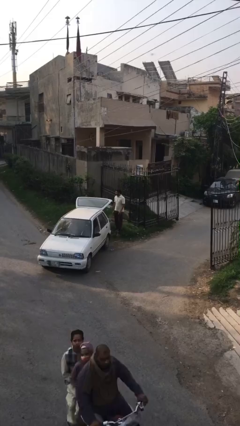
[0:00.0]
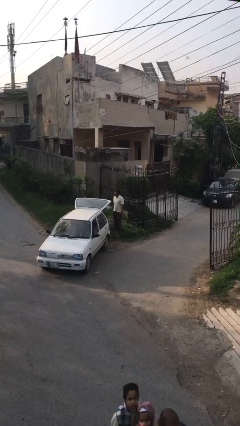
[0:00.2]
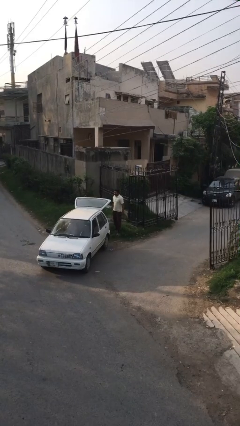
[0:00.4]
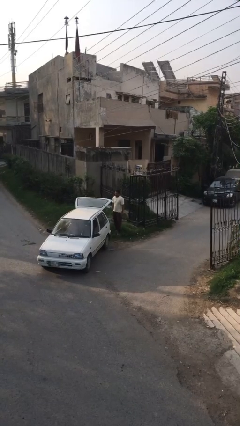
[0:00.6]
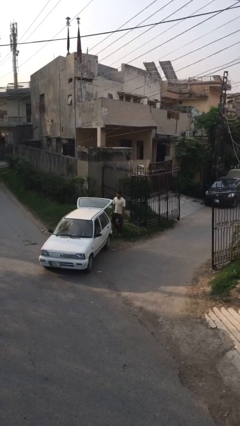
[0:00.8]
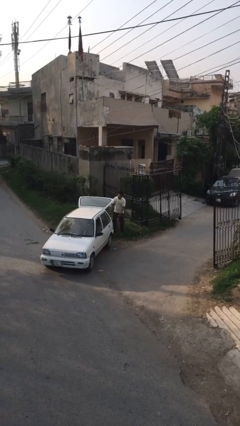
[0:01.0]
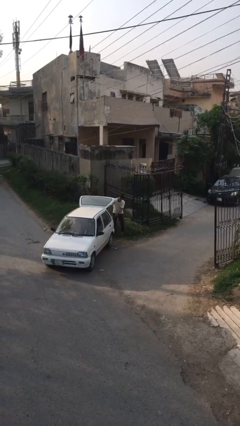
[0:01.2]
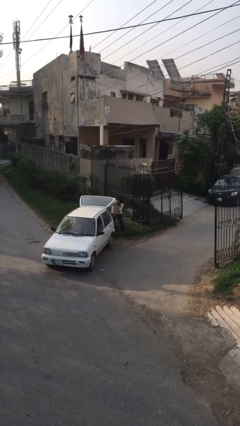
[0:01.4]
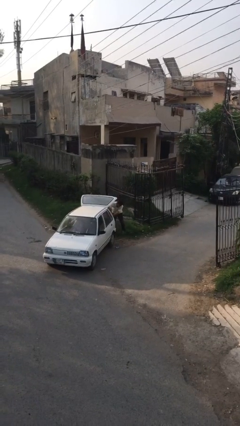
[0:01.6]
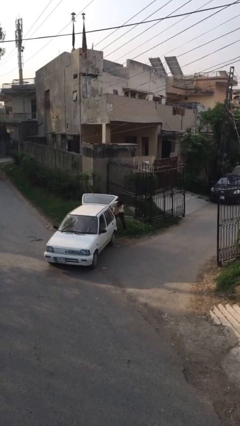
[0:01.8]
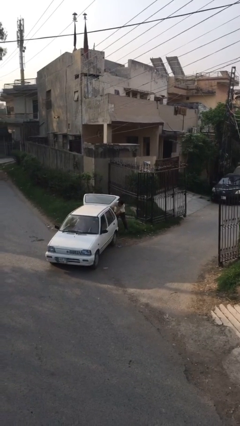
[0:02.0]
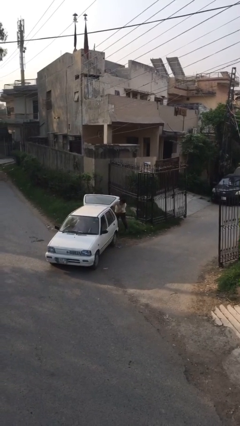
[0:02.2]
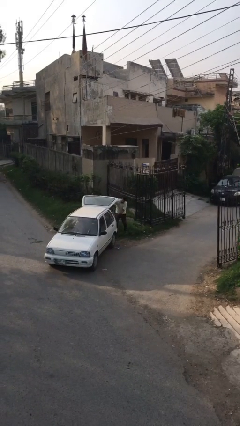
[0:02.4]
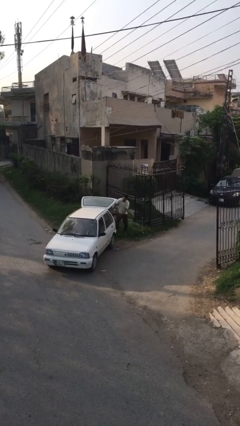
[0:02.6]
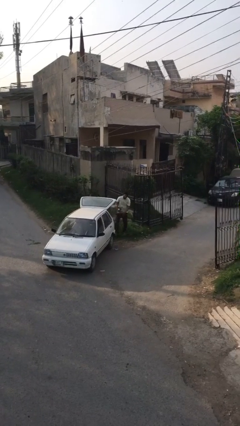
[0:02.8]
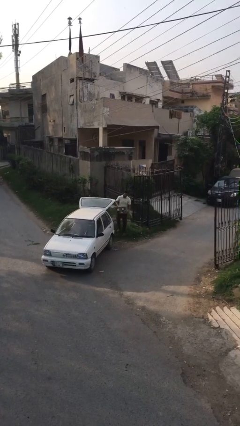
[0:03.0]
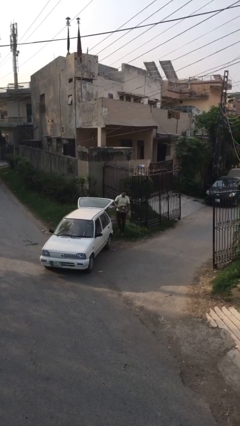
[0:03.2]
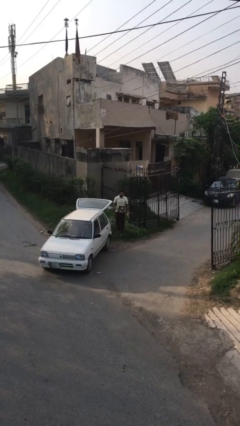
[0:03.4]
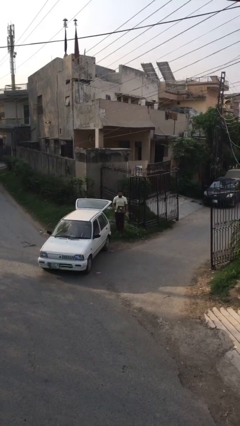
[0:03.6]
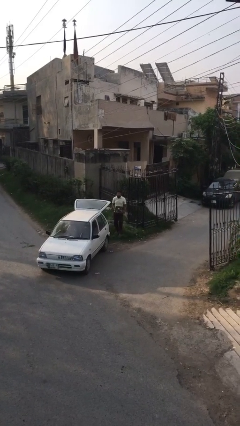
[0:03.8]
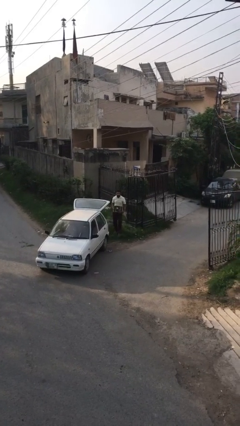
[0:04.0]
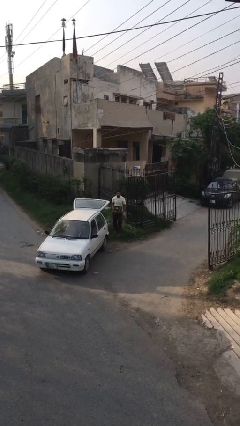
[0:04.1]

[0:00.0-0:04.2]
person unloads car

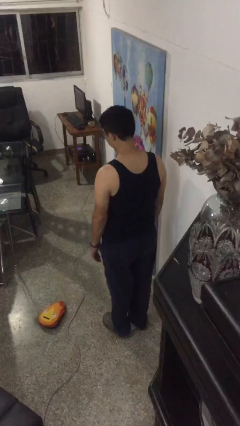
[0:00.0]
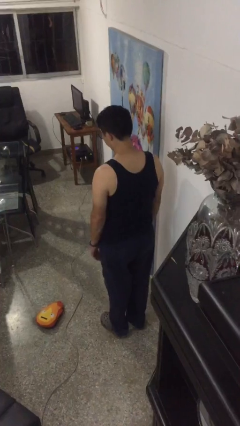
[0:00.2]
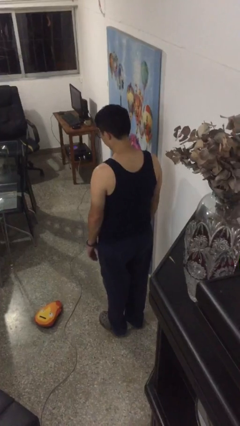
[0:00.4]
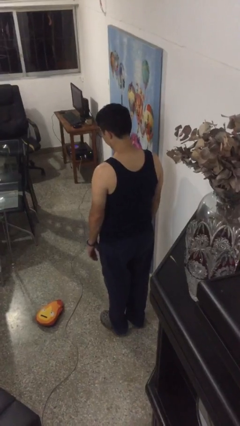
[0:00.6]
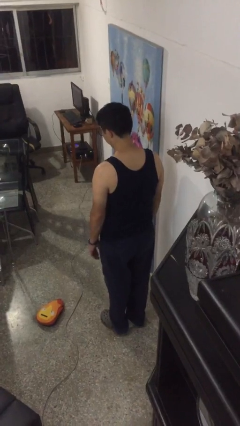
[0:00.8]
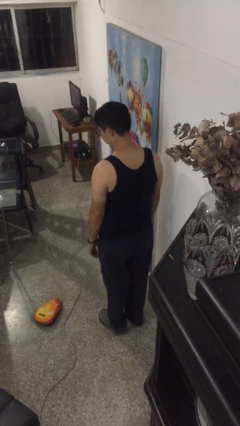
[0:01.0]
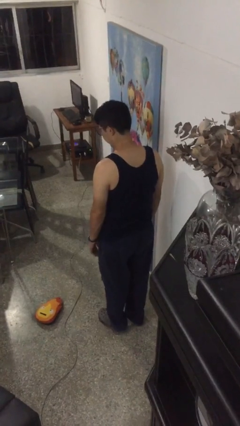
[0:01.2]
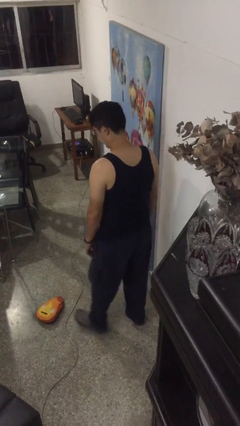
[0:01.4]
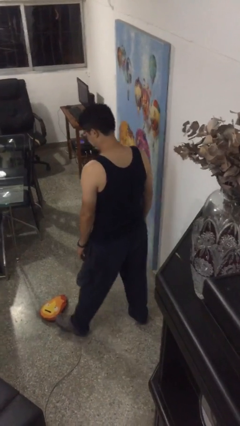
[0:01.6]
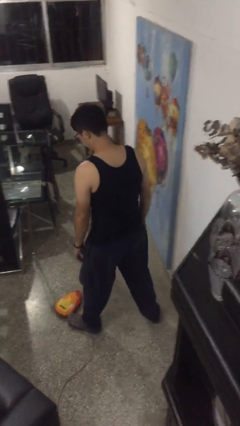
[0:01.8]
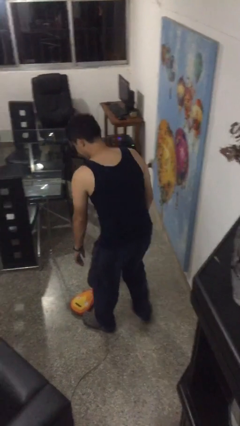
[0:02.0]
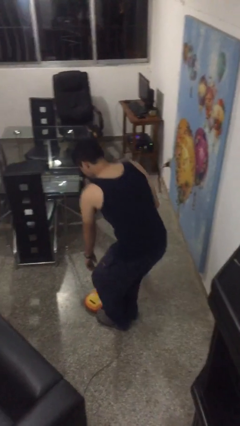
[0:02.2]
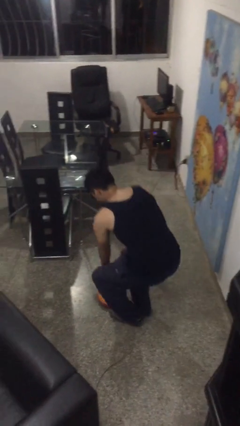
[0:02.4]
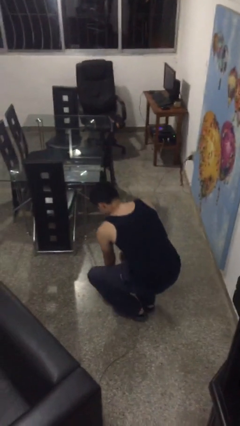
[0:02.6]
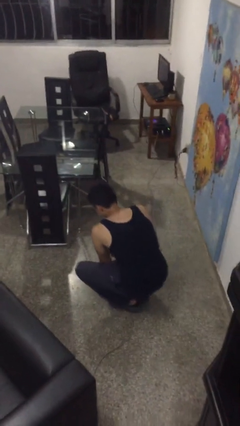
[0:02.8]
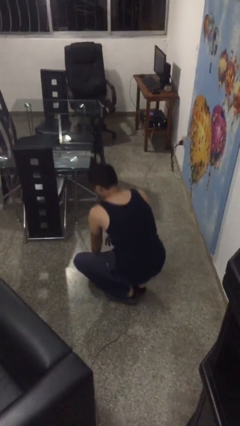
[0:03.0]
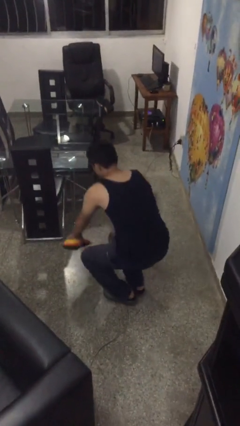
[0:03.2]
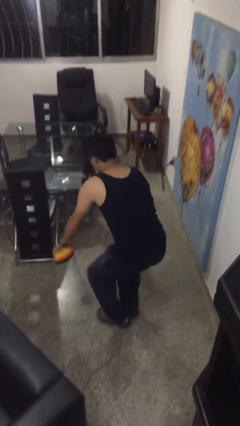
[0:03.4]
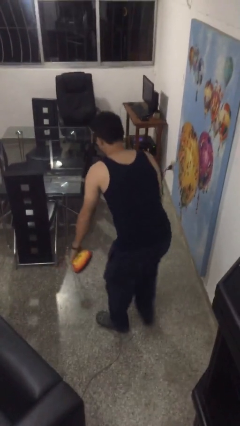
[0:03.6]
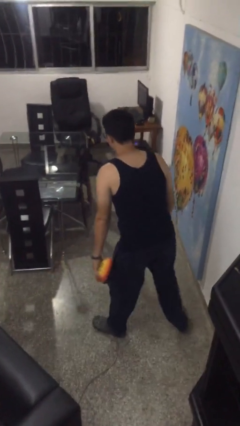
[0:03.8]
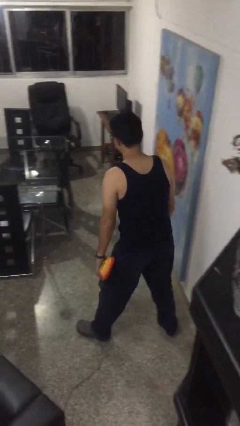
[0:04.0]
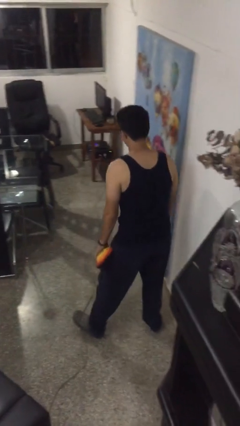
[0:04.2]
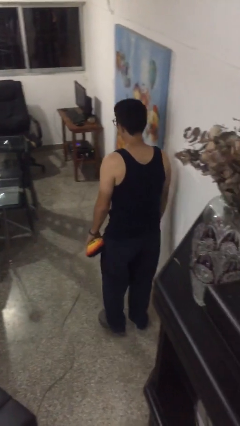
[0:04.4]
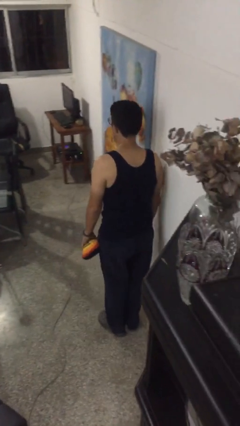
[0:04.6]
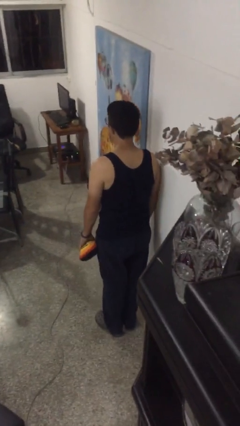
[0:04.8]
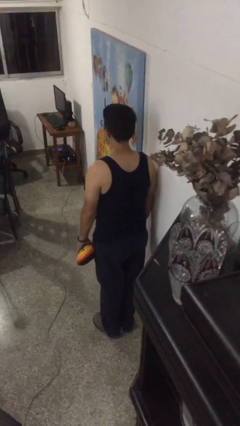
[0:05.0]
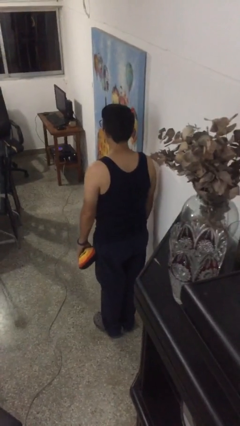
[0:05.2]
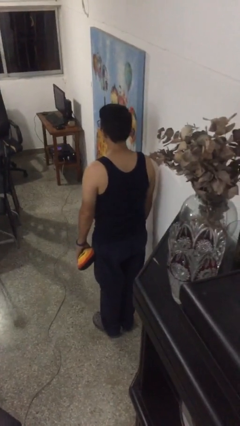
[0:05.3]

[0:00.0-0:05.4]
person picks up object from floor

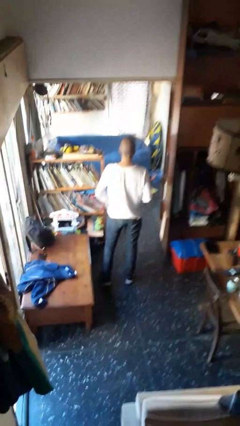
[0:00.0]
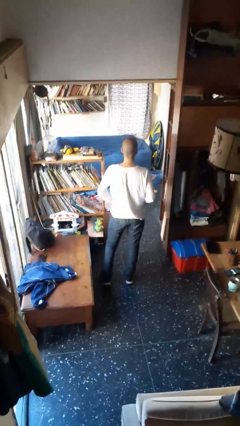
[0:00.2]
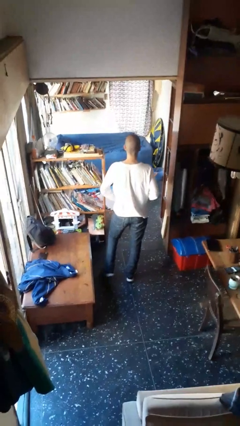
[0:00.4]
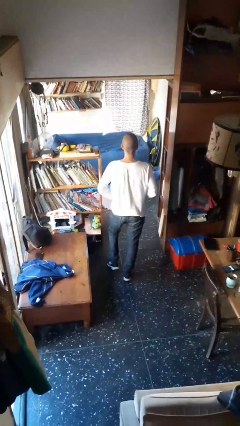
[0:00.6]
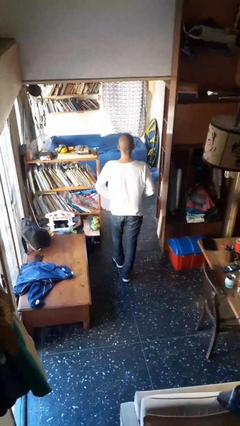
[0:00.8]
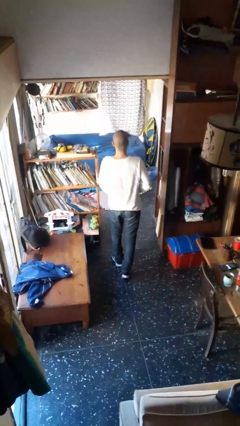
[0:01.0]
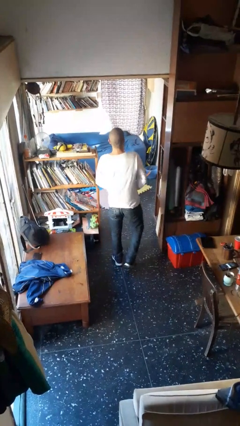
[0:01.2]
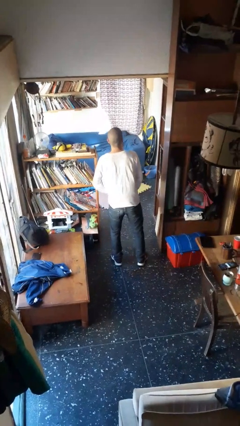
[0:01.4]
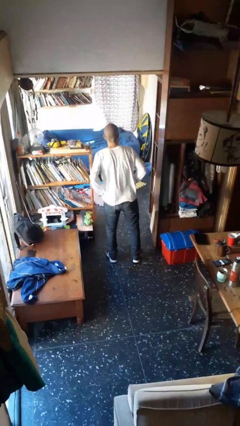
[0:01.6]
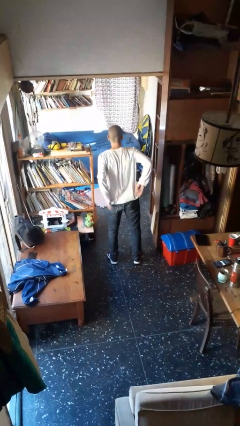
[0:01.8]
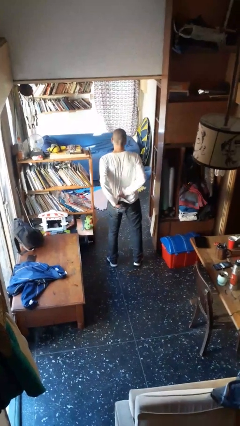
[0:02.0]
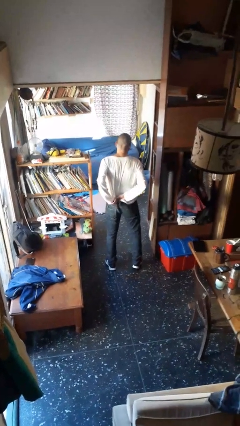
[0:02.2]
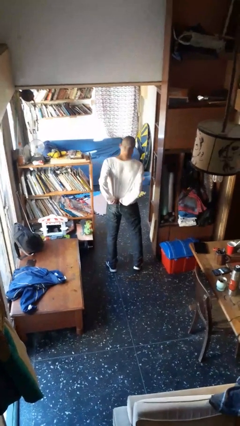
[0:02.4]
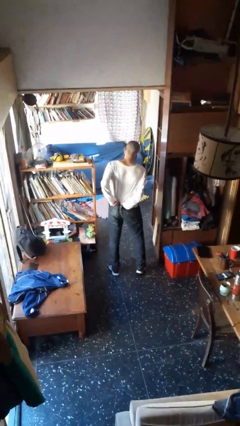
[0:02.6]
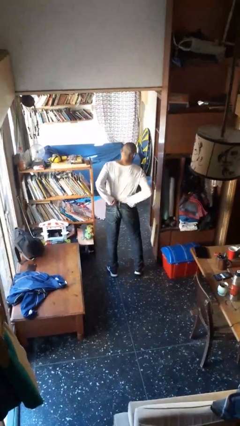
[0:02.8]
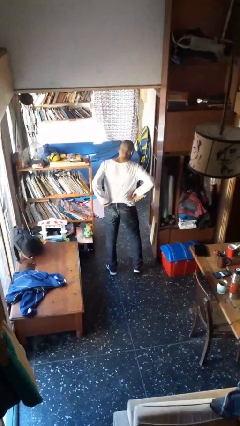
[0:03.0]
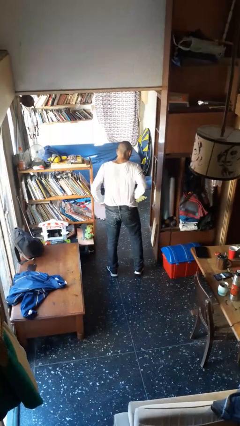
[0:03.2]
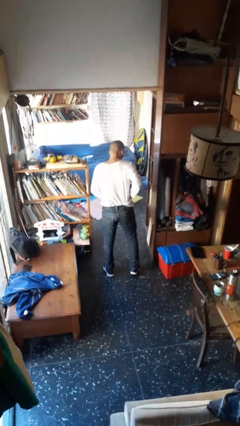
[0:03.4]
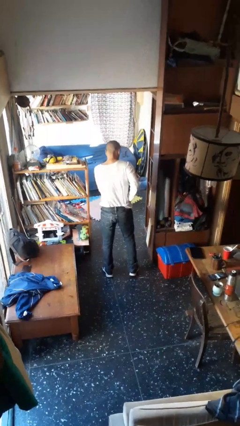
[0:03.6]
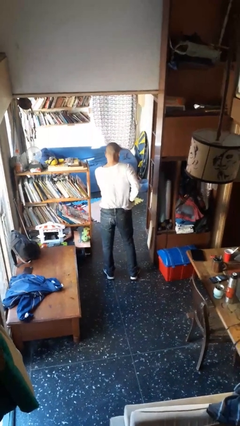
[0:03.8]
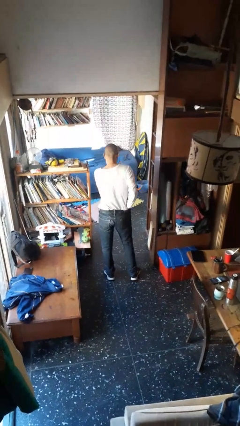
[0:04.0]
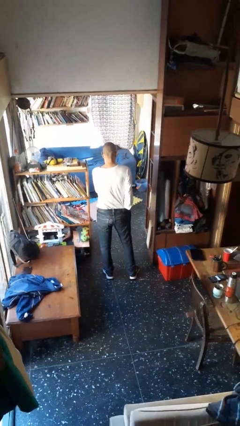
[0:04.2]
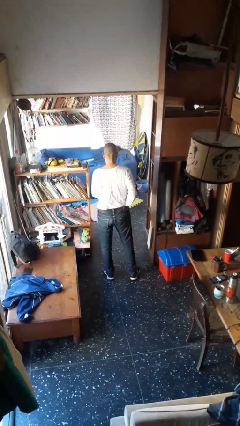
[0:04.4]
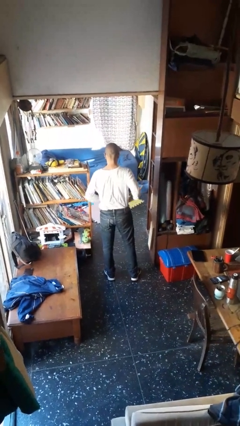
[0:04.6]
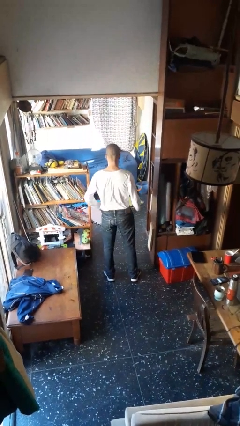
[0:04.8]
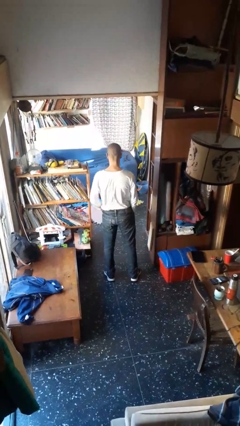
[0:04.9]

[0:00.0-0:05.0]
person tucks in shirt

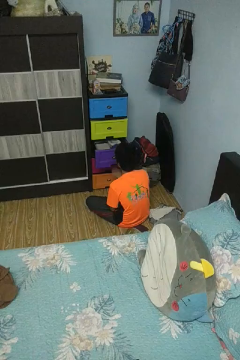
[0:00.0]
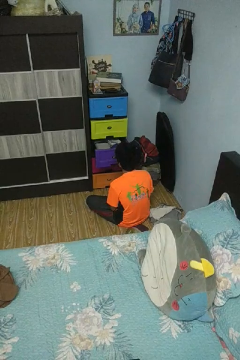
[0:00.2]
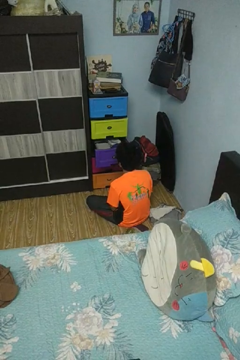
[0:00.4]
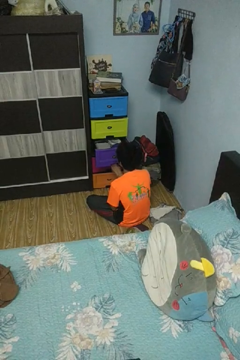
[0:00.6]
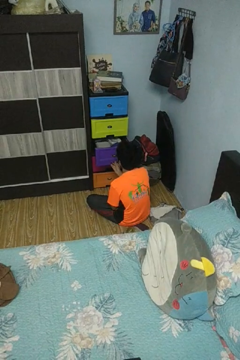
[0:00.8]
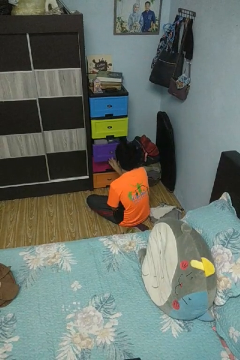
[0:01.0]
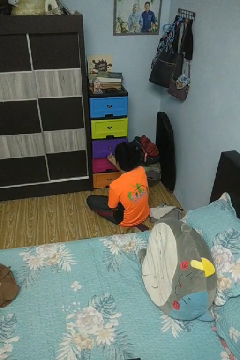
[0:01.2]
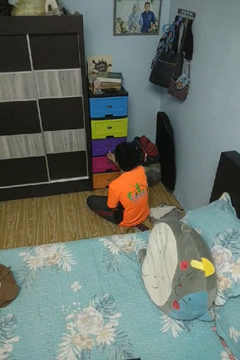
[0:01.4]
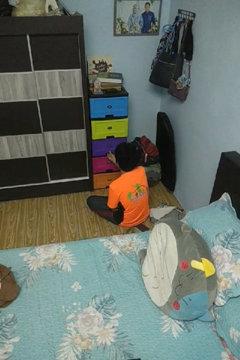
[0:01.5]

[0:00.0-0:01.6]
person closes dresser drawer

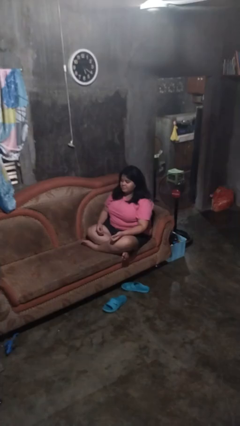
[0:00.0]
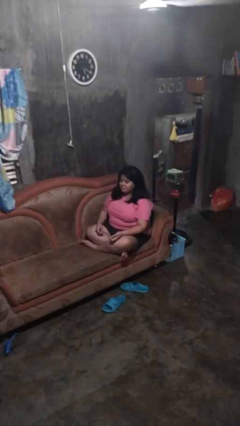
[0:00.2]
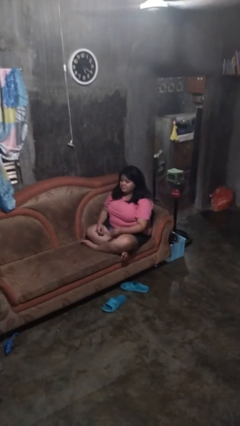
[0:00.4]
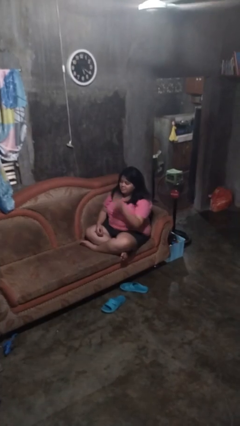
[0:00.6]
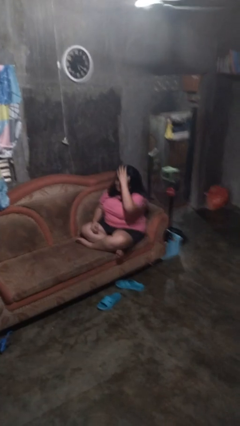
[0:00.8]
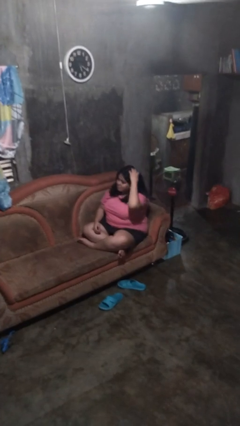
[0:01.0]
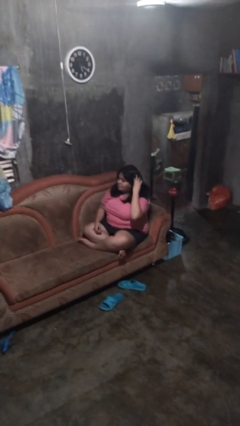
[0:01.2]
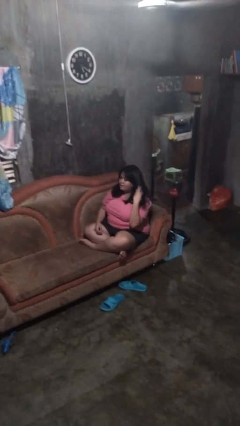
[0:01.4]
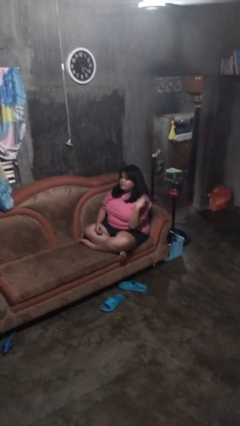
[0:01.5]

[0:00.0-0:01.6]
person strokes hair

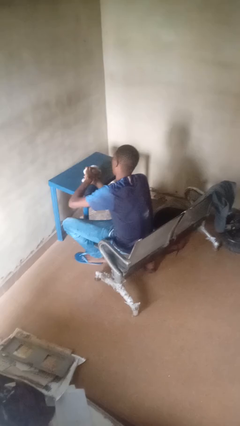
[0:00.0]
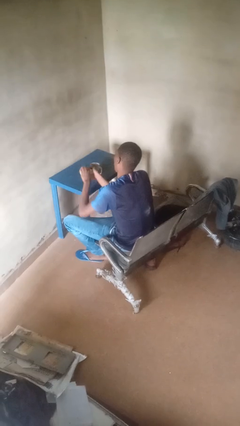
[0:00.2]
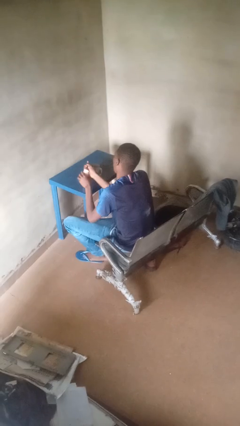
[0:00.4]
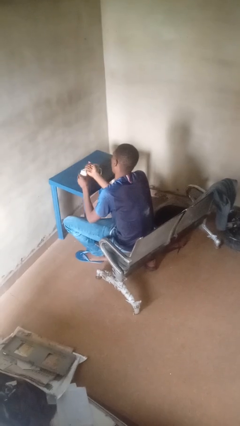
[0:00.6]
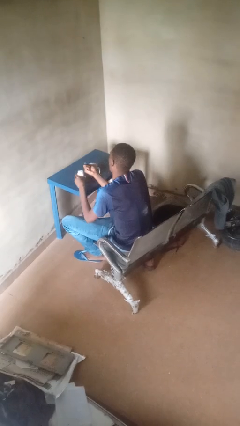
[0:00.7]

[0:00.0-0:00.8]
person takes medicine pills
